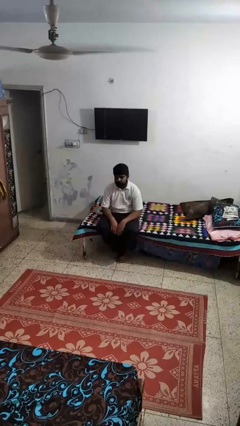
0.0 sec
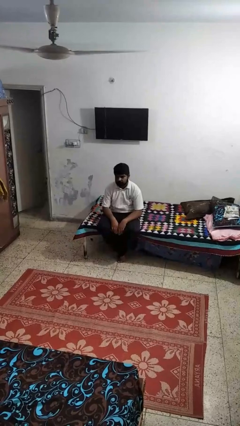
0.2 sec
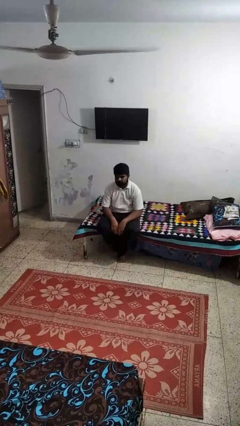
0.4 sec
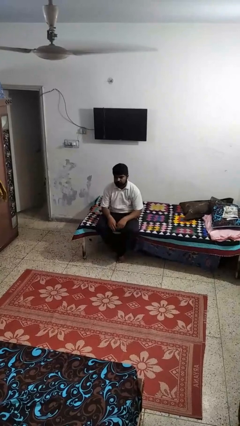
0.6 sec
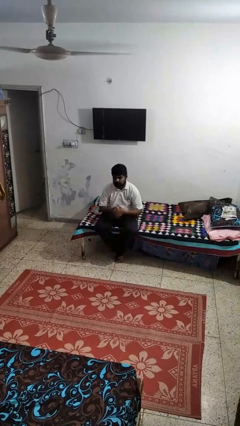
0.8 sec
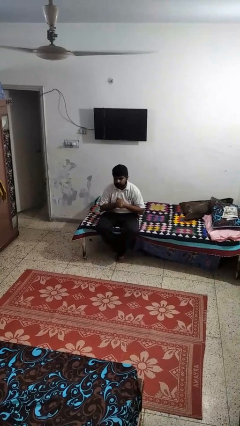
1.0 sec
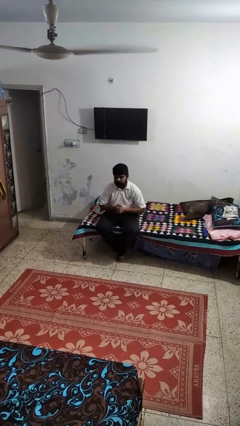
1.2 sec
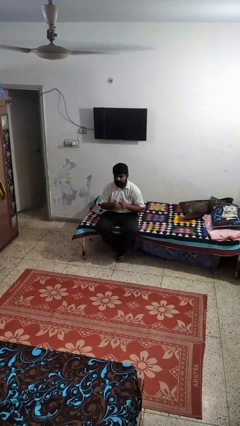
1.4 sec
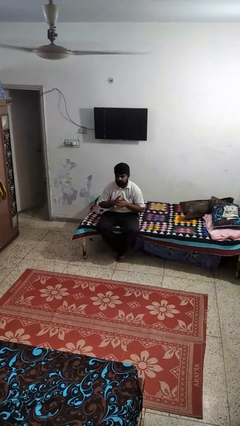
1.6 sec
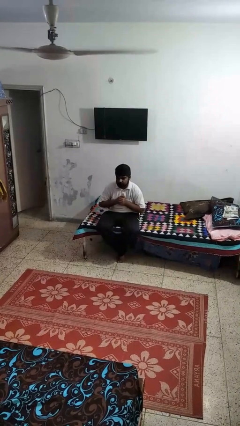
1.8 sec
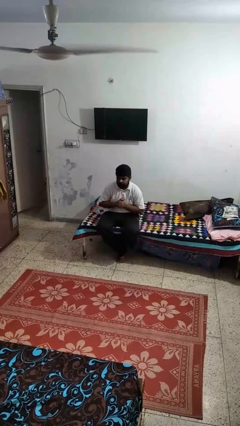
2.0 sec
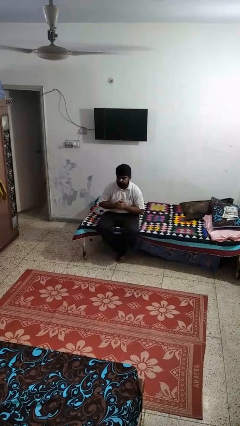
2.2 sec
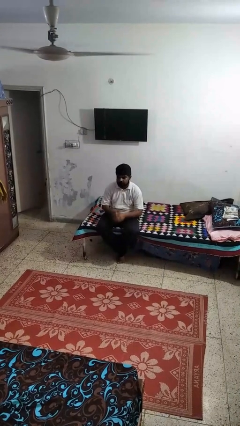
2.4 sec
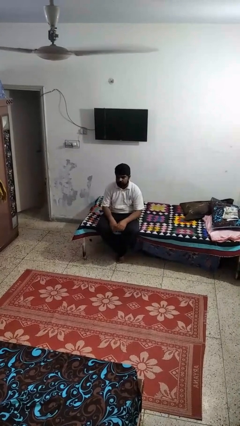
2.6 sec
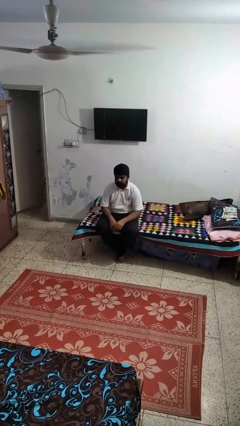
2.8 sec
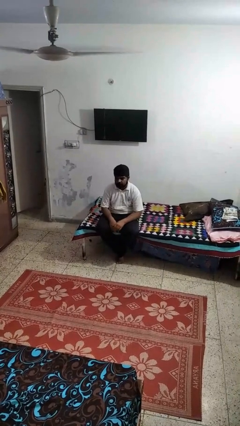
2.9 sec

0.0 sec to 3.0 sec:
person cracks knuckles

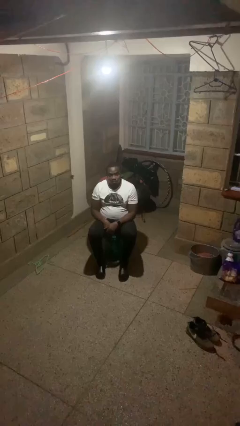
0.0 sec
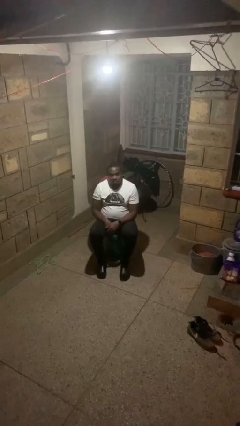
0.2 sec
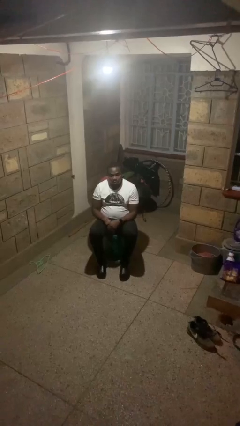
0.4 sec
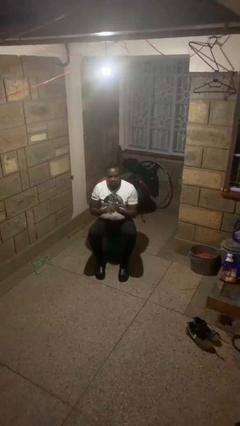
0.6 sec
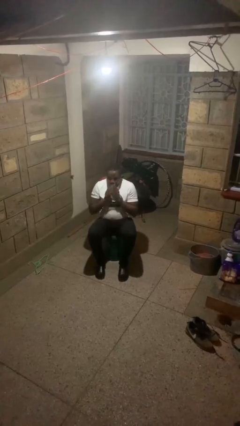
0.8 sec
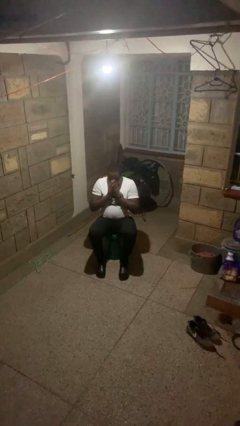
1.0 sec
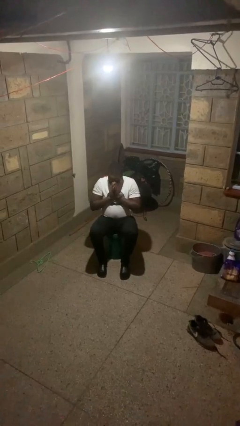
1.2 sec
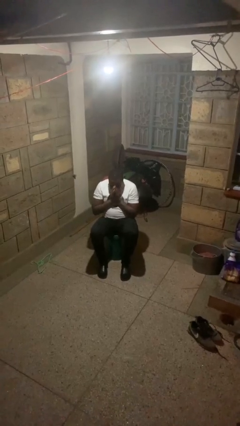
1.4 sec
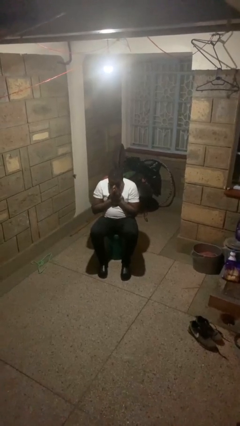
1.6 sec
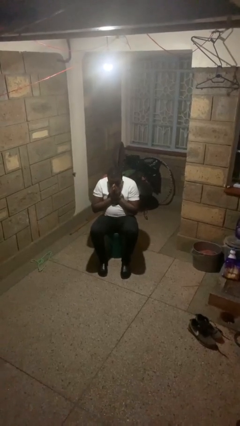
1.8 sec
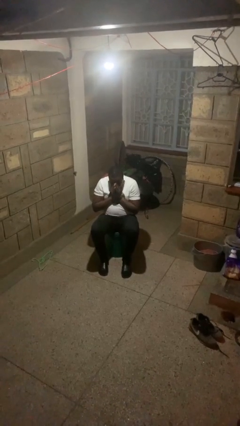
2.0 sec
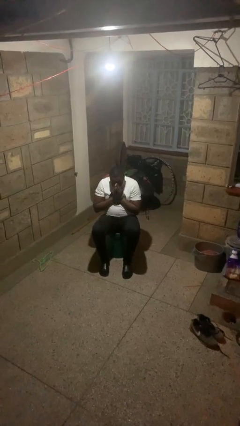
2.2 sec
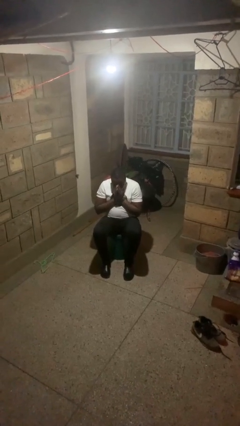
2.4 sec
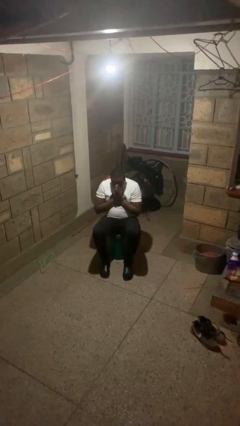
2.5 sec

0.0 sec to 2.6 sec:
person sneezes into hand

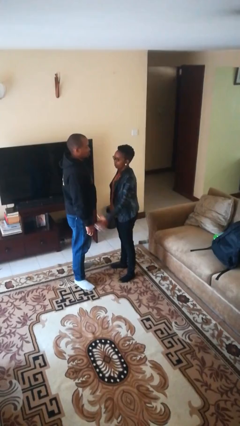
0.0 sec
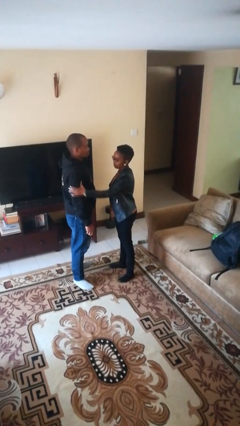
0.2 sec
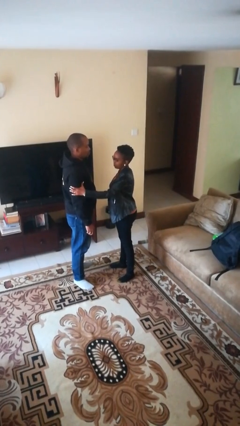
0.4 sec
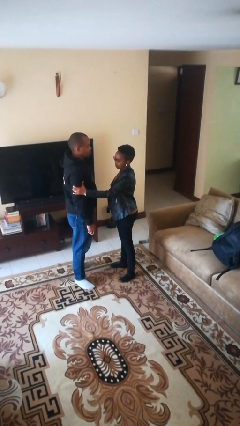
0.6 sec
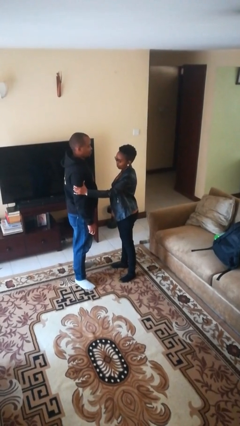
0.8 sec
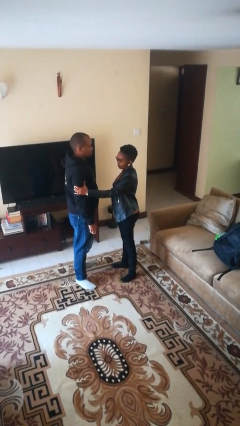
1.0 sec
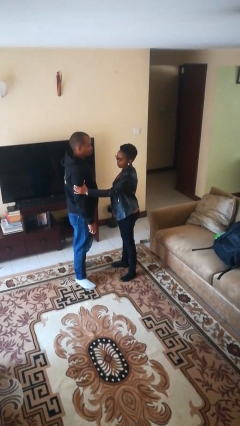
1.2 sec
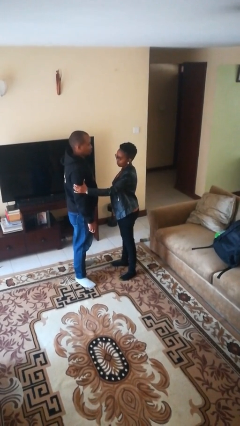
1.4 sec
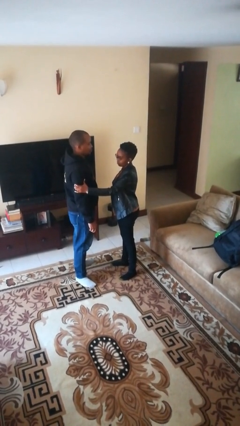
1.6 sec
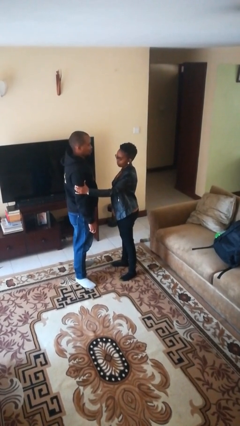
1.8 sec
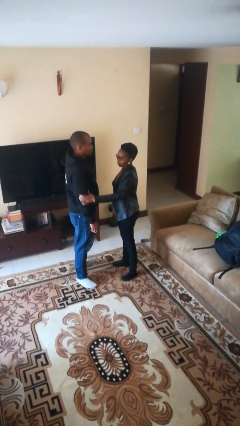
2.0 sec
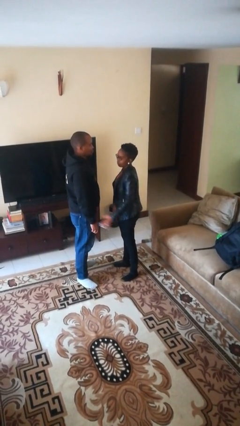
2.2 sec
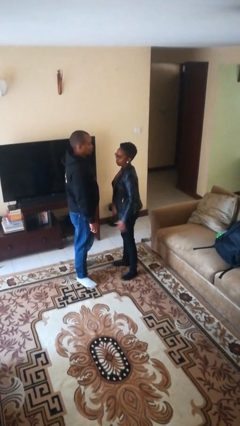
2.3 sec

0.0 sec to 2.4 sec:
person grabs person by bicep

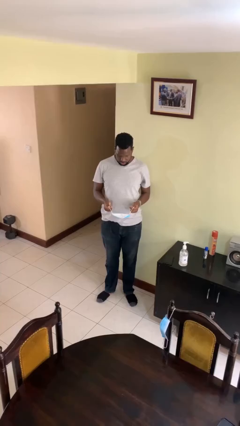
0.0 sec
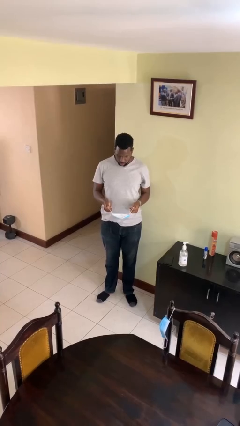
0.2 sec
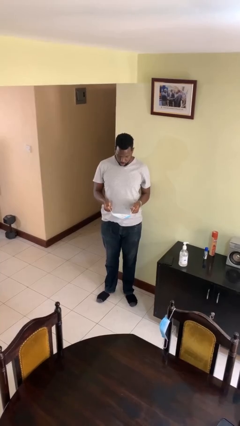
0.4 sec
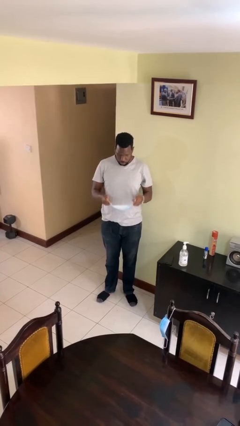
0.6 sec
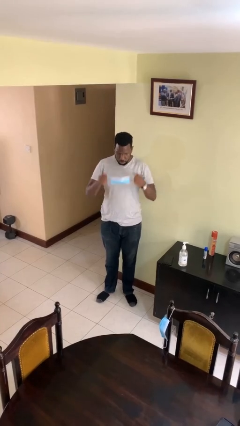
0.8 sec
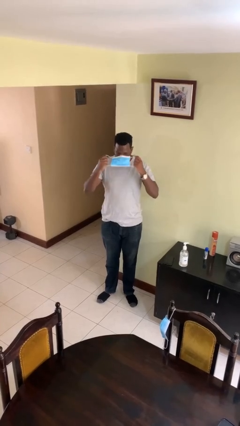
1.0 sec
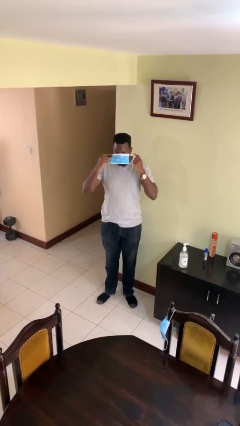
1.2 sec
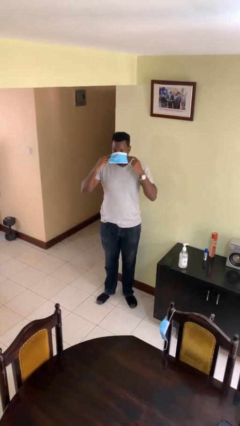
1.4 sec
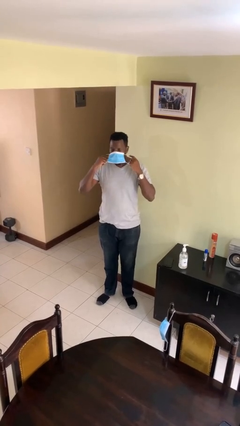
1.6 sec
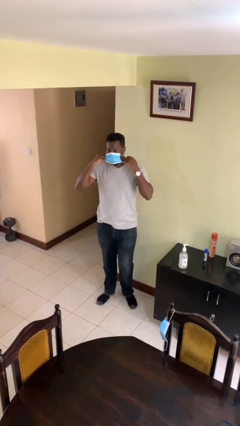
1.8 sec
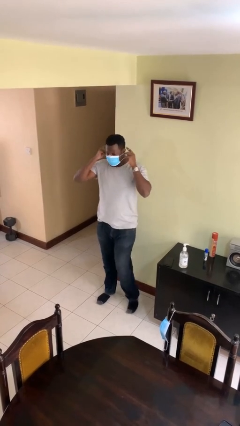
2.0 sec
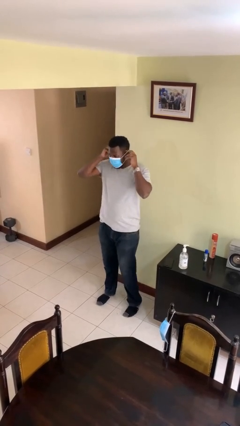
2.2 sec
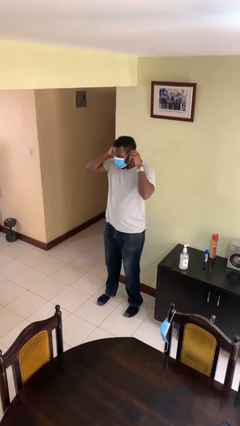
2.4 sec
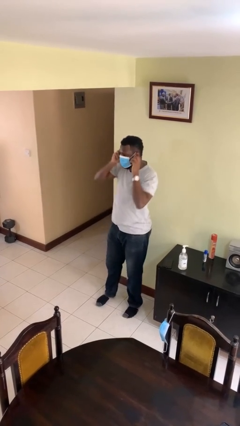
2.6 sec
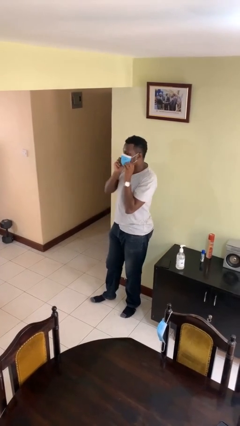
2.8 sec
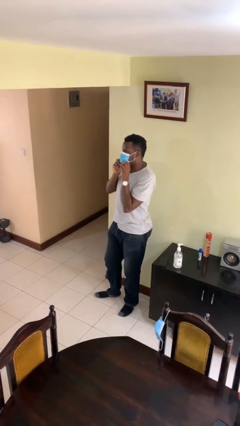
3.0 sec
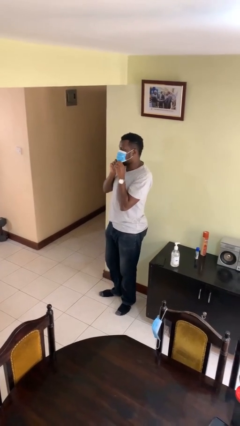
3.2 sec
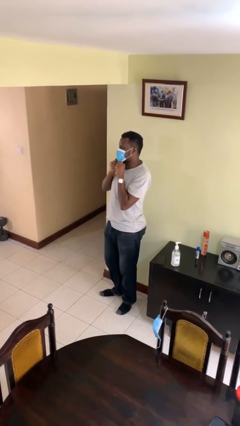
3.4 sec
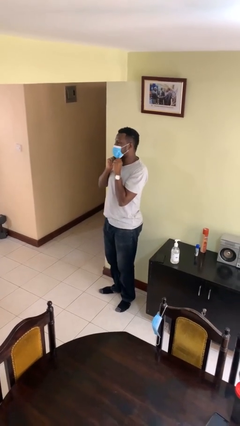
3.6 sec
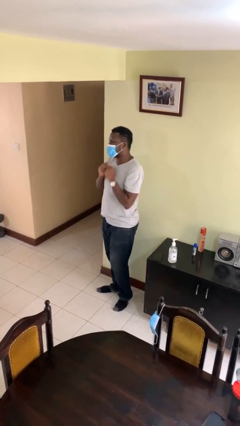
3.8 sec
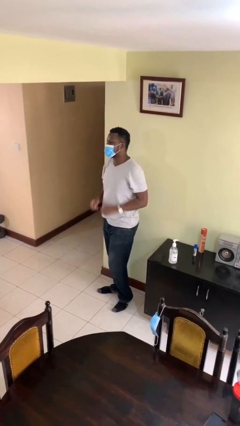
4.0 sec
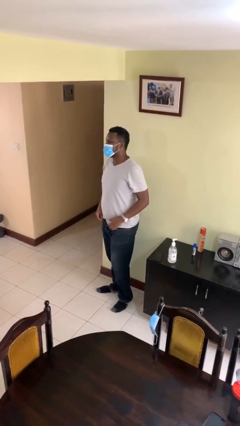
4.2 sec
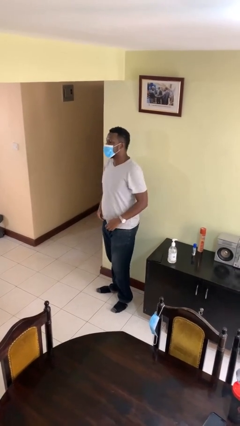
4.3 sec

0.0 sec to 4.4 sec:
person puts on facemask

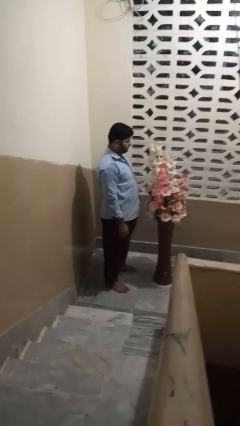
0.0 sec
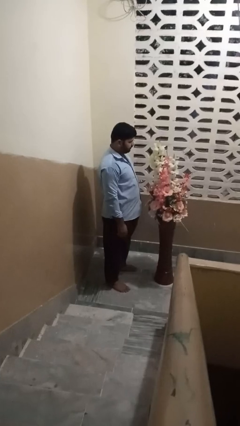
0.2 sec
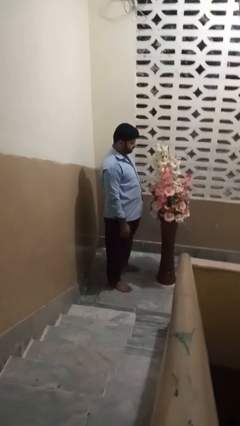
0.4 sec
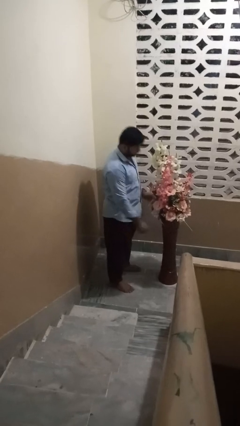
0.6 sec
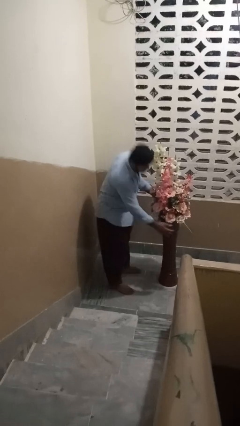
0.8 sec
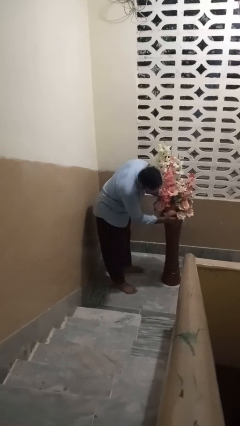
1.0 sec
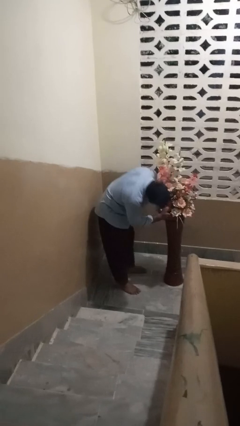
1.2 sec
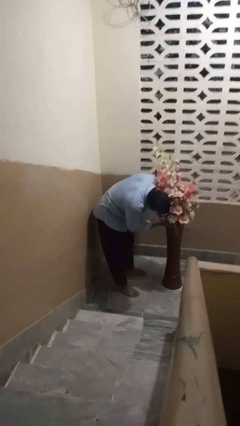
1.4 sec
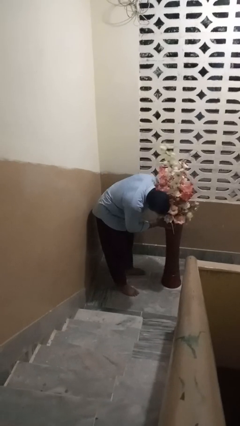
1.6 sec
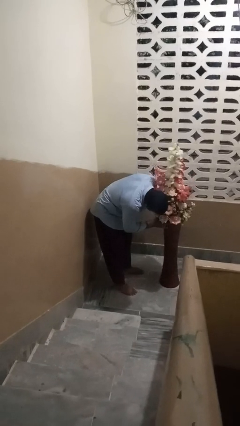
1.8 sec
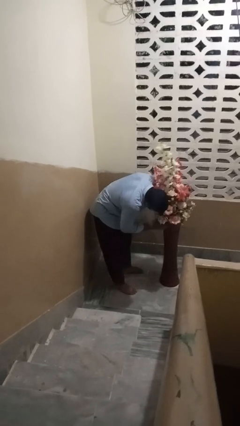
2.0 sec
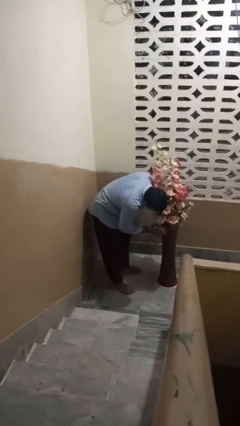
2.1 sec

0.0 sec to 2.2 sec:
person arranges flowers in vase

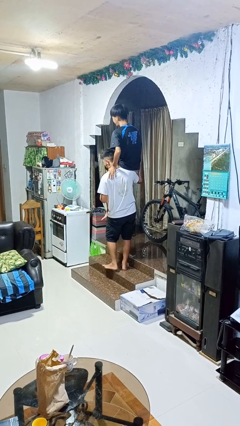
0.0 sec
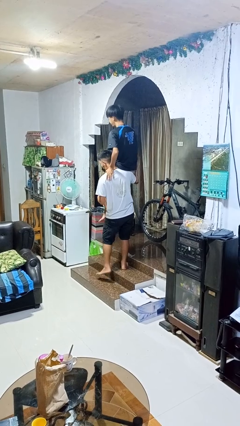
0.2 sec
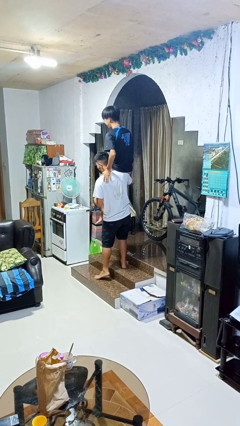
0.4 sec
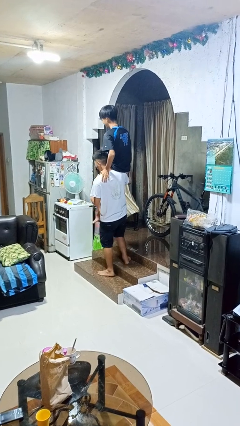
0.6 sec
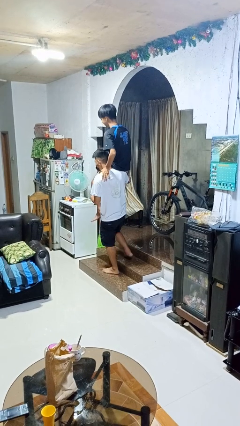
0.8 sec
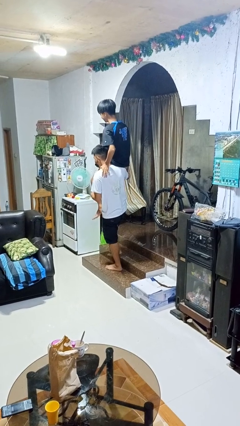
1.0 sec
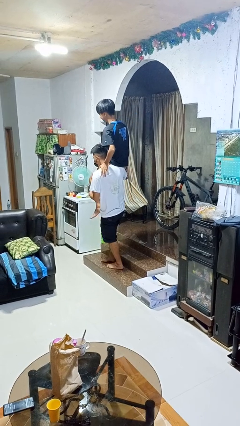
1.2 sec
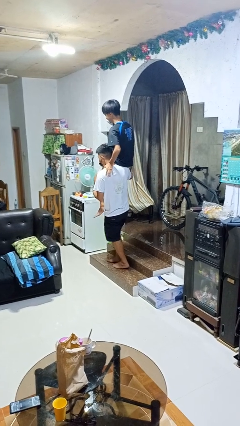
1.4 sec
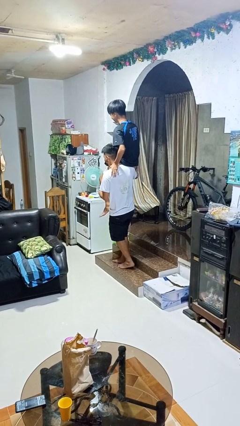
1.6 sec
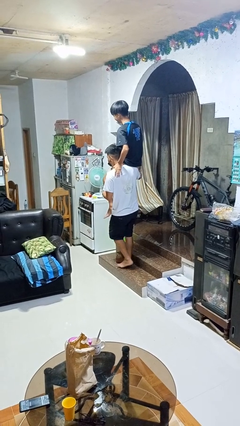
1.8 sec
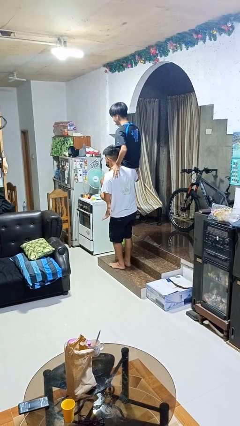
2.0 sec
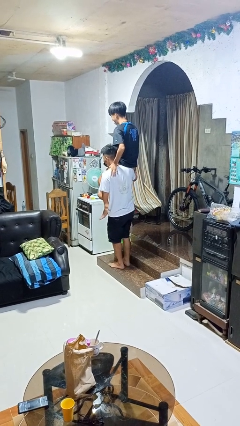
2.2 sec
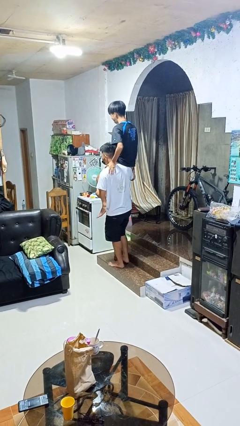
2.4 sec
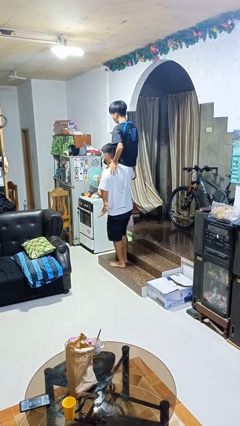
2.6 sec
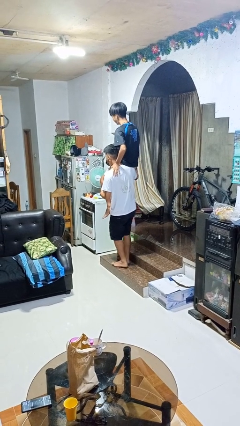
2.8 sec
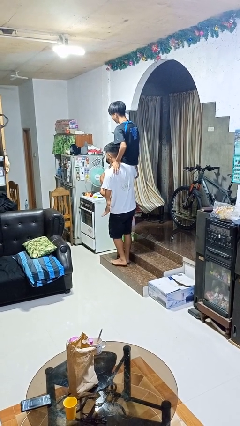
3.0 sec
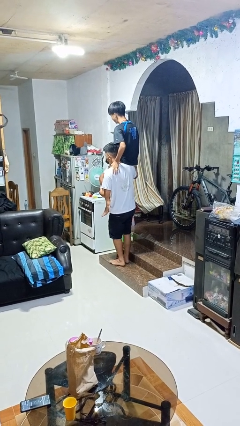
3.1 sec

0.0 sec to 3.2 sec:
person carries person on shoulders
